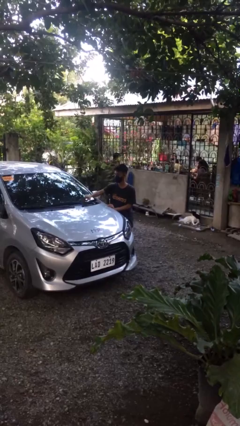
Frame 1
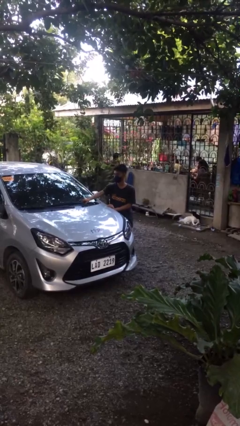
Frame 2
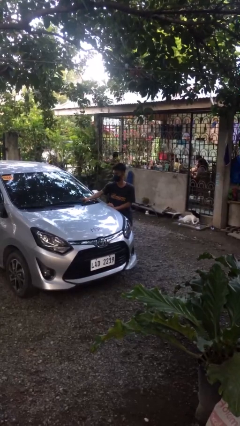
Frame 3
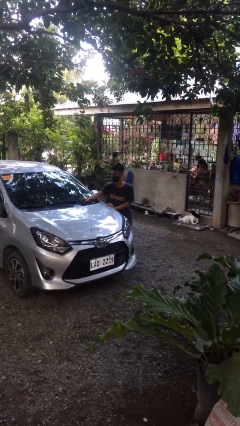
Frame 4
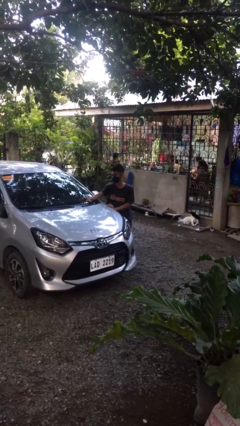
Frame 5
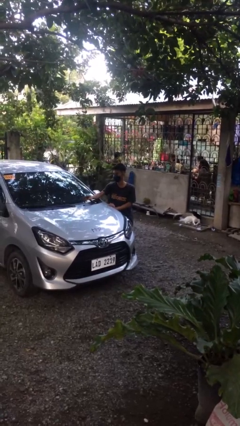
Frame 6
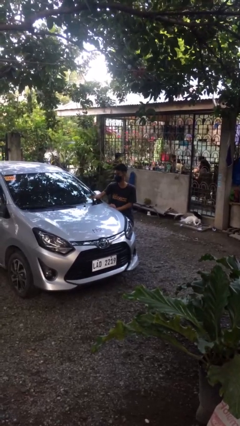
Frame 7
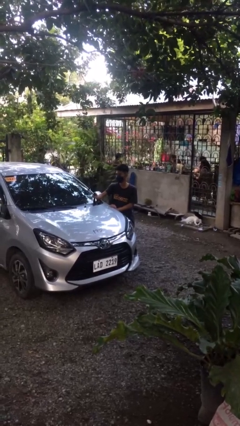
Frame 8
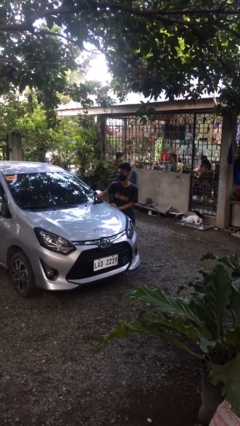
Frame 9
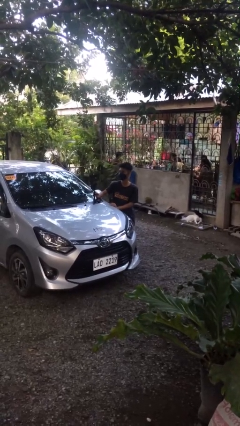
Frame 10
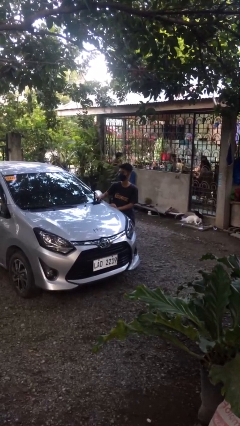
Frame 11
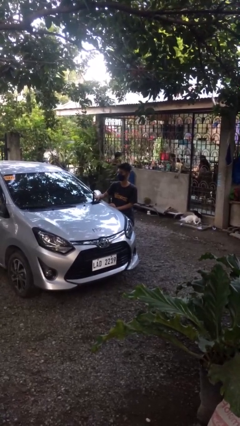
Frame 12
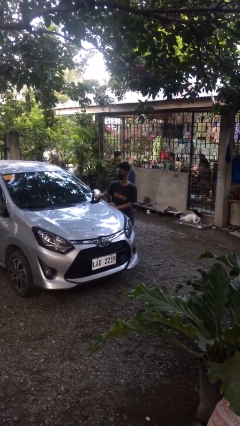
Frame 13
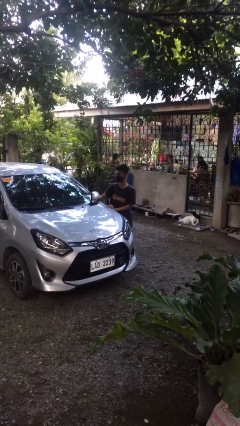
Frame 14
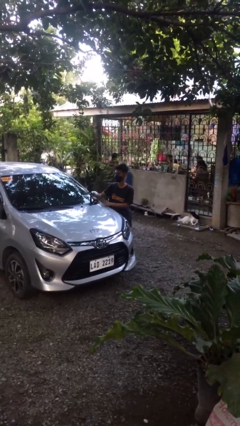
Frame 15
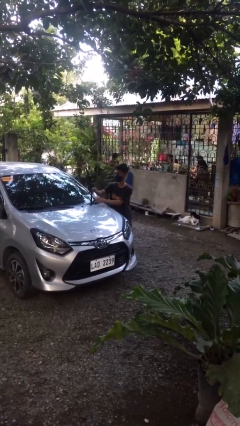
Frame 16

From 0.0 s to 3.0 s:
person flips up car wipers

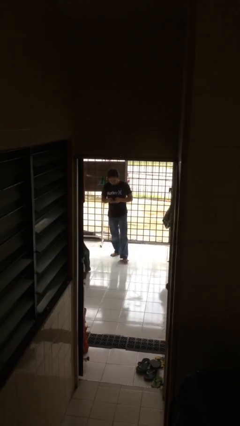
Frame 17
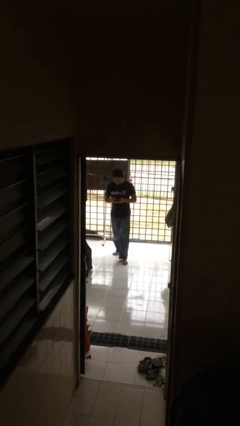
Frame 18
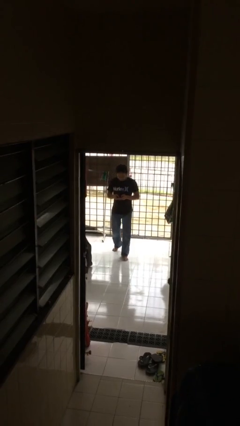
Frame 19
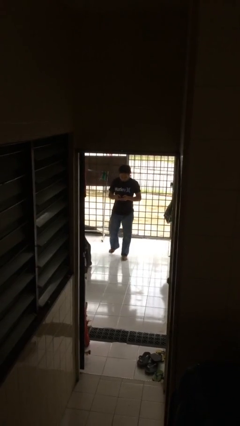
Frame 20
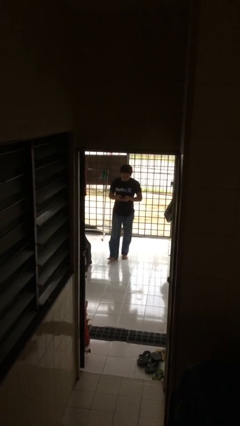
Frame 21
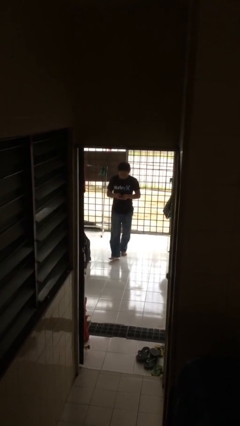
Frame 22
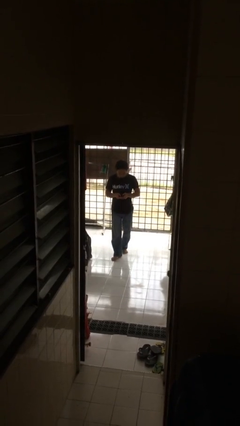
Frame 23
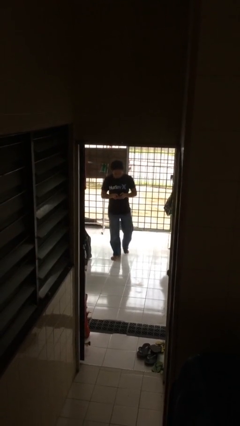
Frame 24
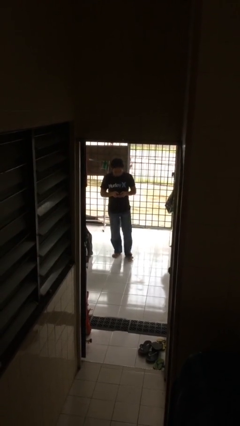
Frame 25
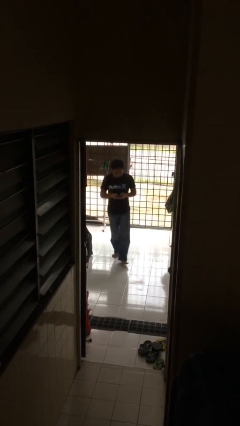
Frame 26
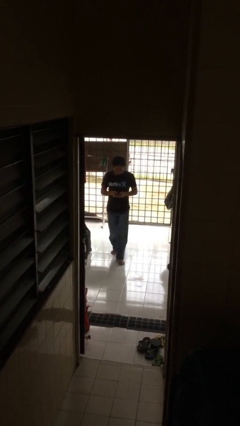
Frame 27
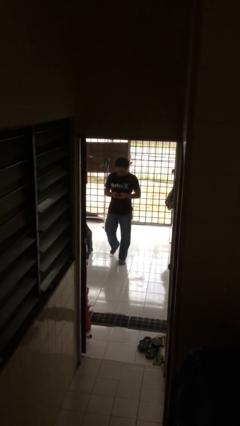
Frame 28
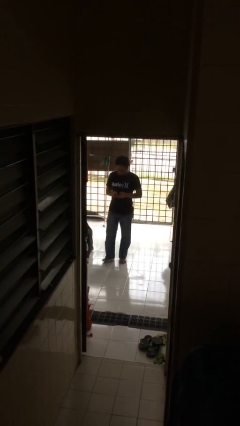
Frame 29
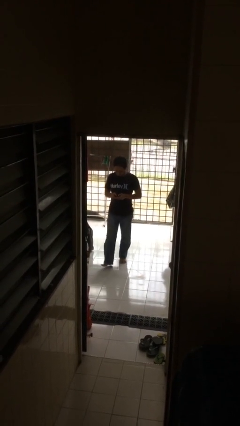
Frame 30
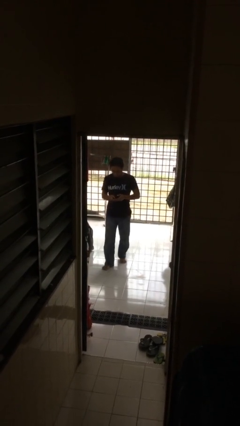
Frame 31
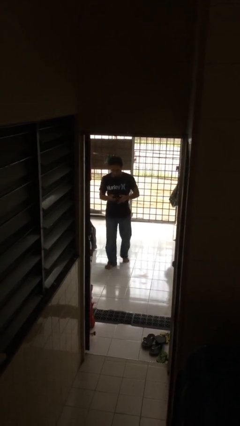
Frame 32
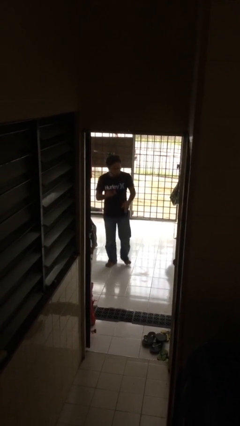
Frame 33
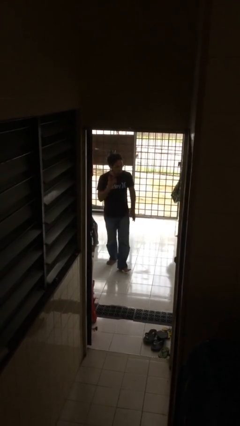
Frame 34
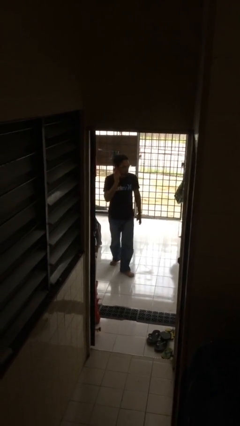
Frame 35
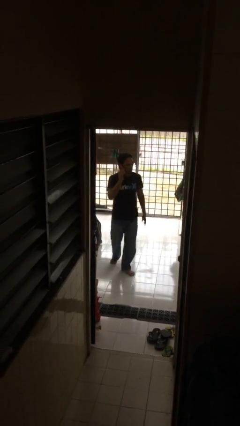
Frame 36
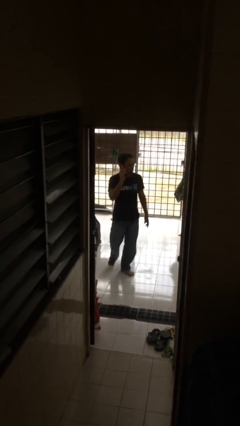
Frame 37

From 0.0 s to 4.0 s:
person texts on phone

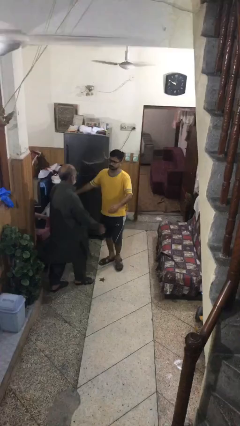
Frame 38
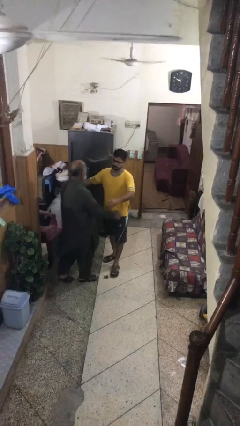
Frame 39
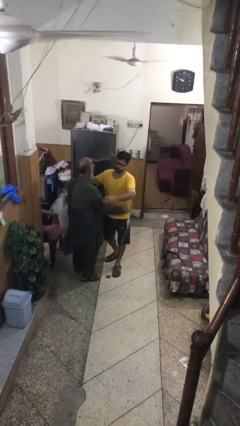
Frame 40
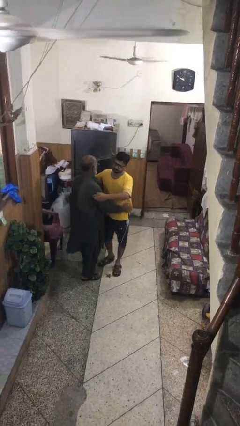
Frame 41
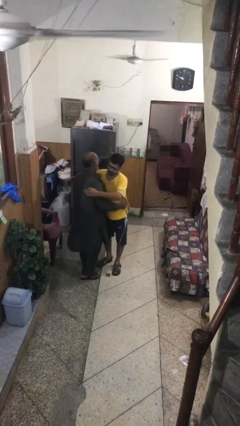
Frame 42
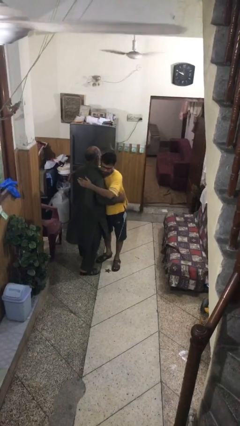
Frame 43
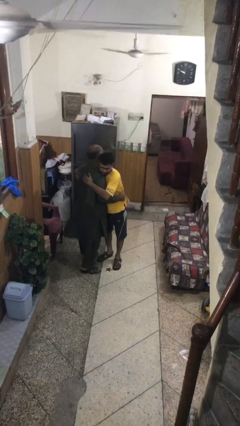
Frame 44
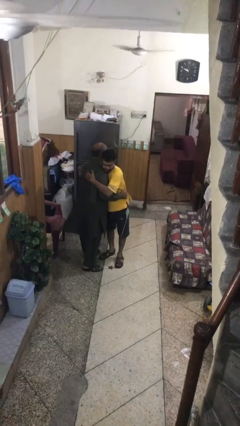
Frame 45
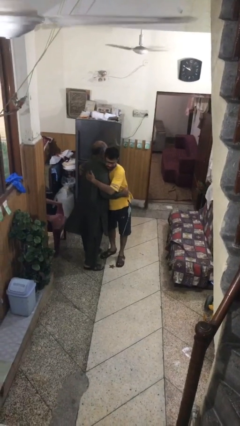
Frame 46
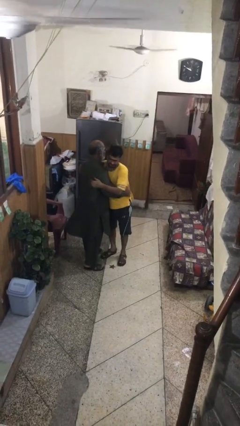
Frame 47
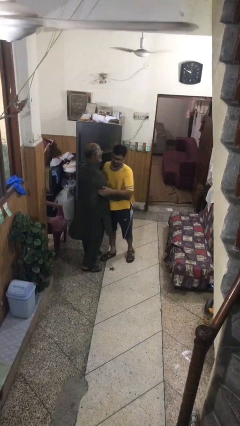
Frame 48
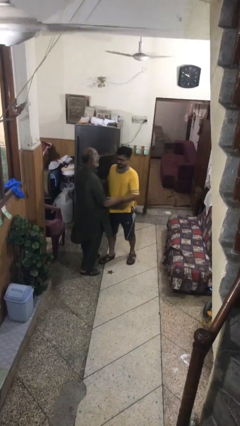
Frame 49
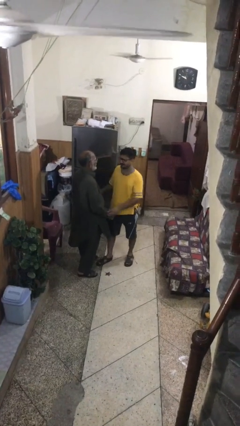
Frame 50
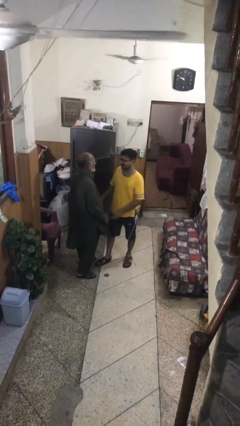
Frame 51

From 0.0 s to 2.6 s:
person embraces person

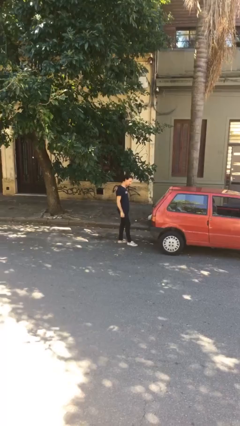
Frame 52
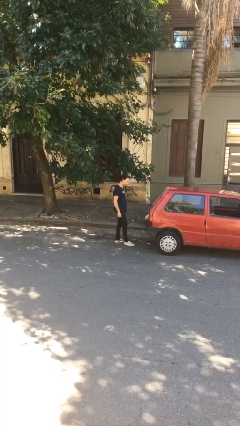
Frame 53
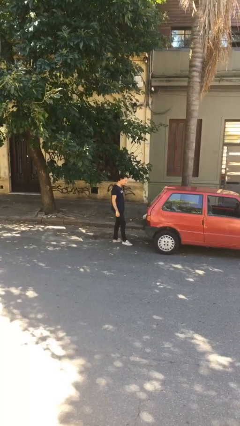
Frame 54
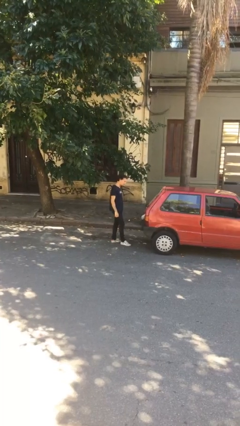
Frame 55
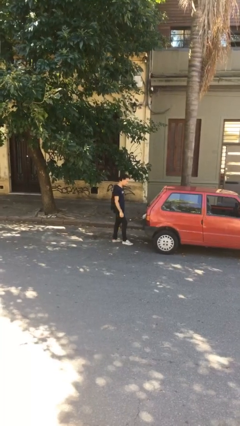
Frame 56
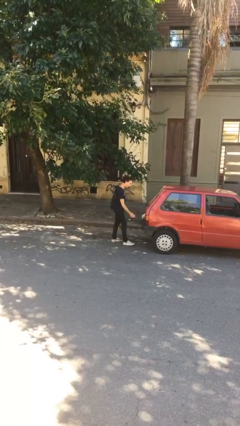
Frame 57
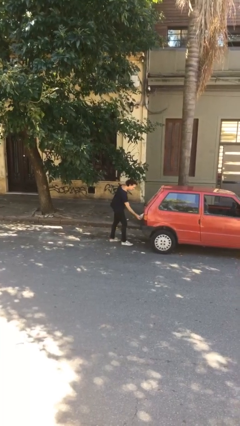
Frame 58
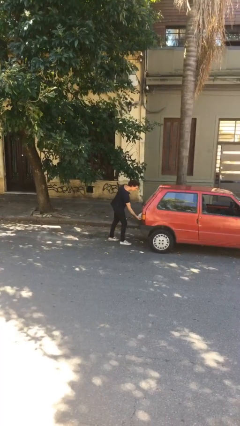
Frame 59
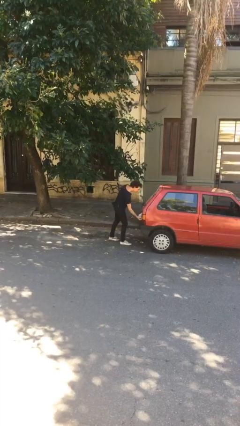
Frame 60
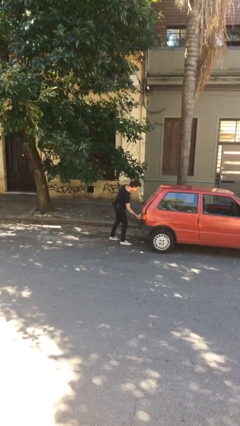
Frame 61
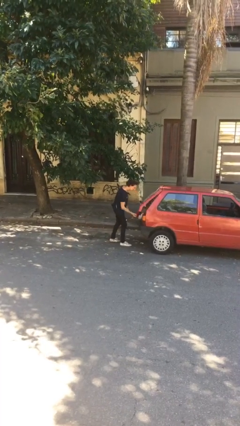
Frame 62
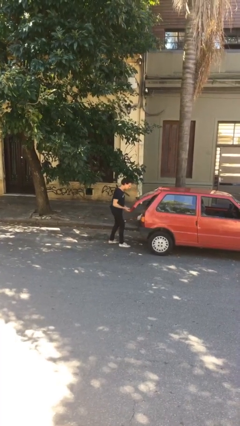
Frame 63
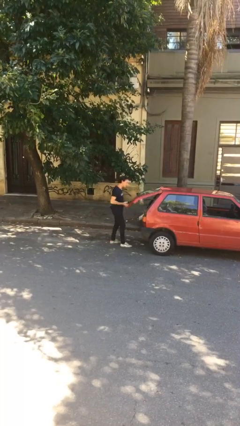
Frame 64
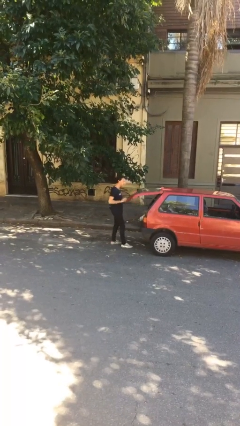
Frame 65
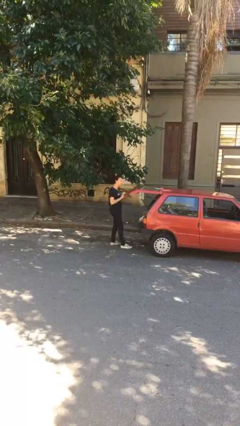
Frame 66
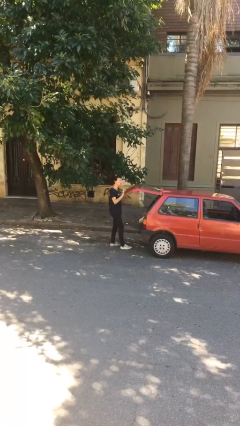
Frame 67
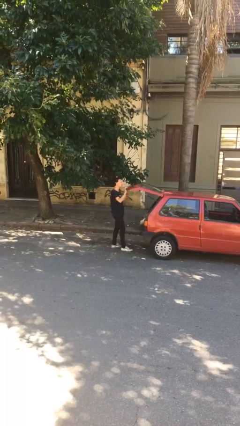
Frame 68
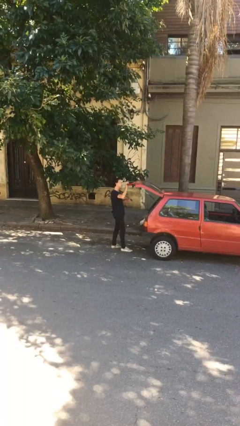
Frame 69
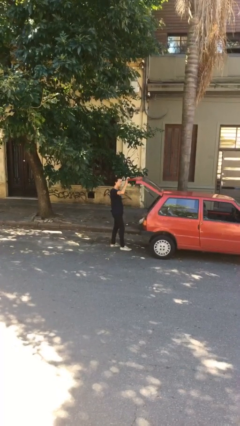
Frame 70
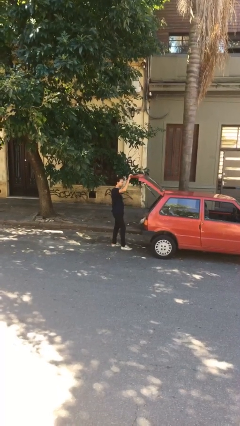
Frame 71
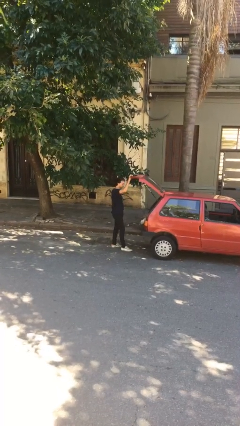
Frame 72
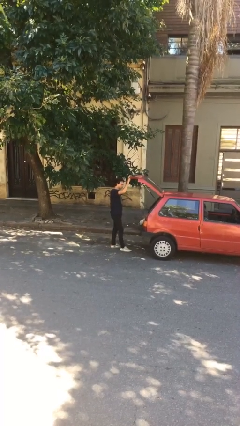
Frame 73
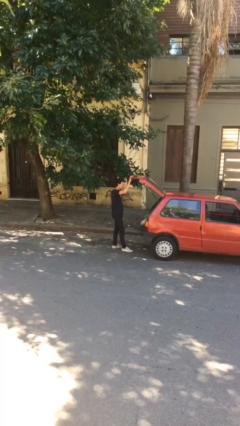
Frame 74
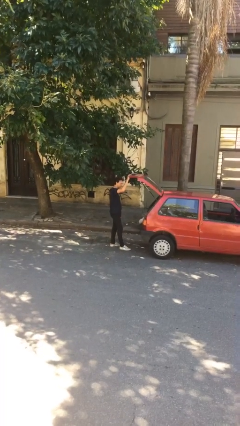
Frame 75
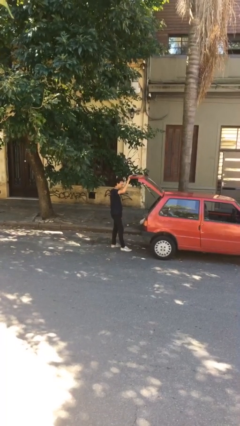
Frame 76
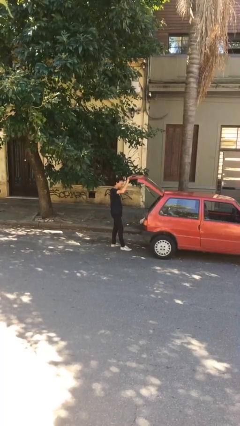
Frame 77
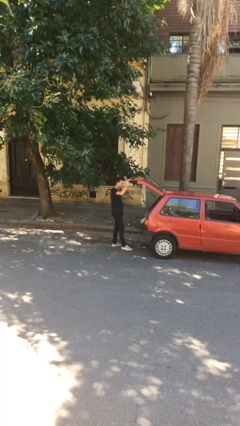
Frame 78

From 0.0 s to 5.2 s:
person opens car trunk

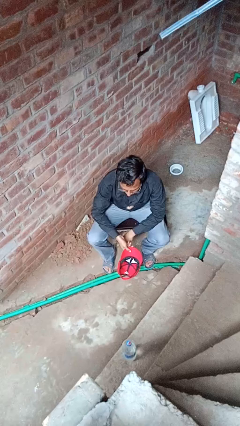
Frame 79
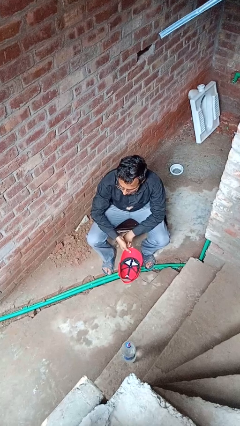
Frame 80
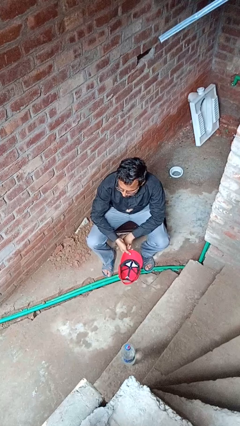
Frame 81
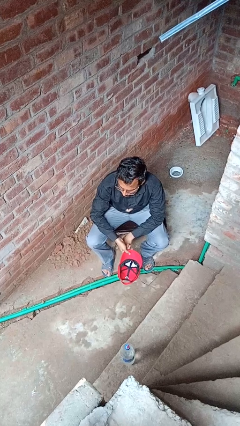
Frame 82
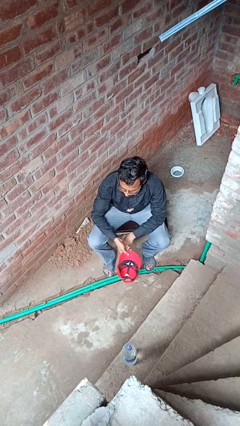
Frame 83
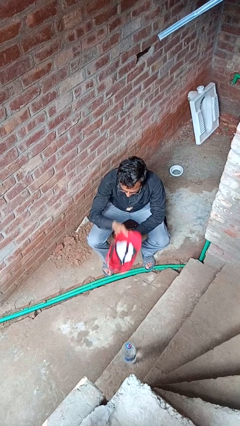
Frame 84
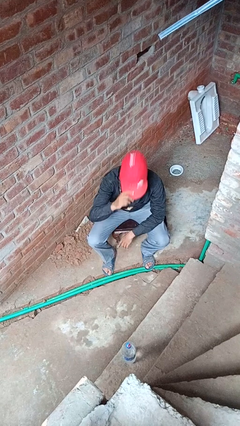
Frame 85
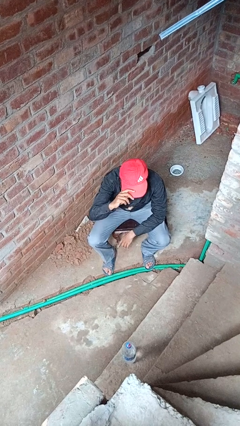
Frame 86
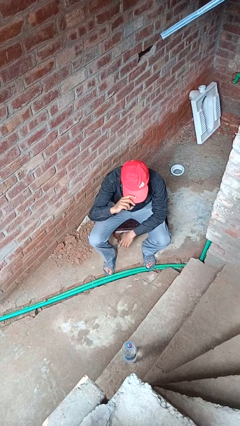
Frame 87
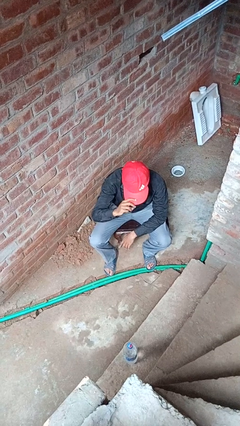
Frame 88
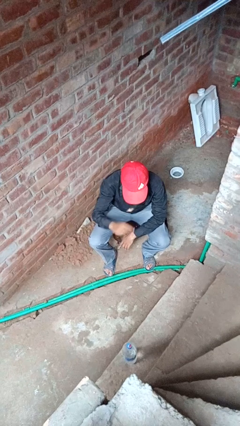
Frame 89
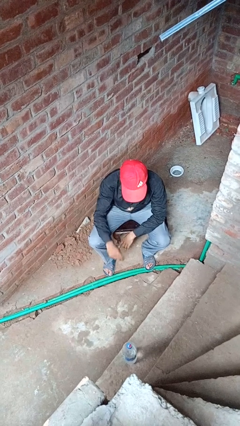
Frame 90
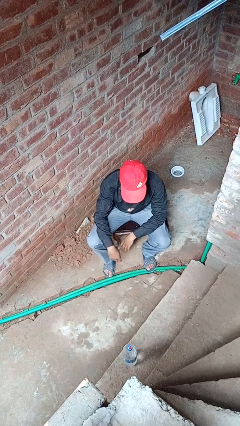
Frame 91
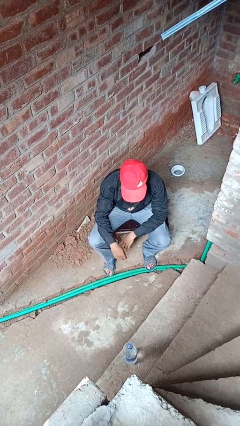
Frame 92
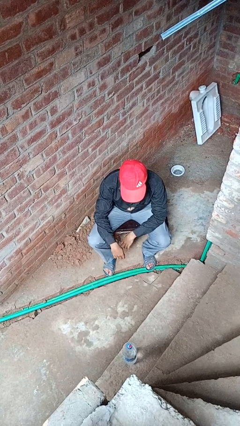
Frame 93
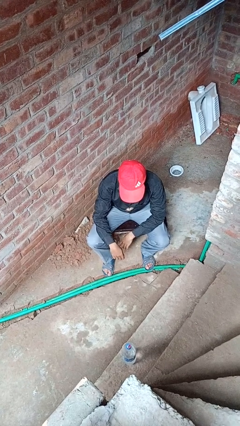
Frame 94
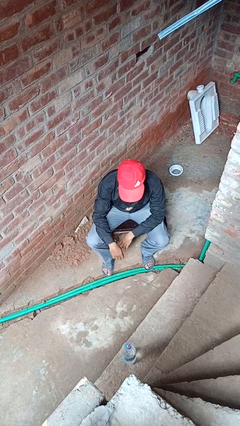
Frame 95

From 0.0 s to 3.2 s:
person puts on hat
